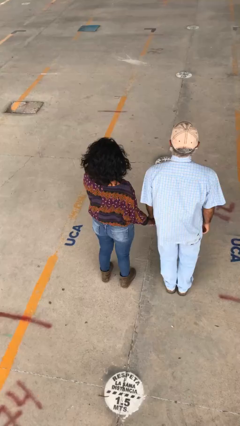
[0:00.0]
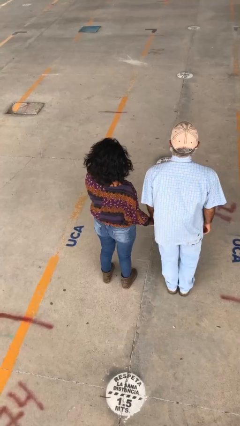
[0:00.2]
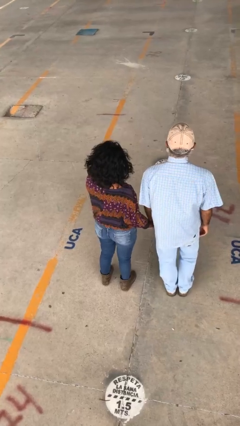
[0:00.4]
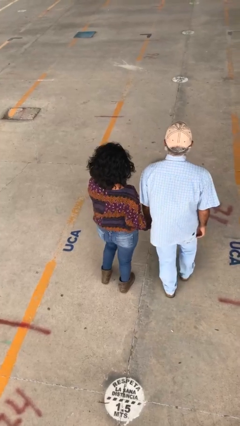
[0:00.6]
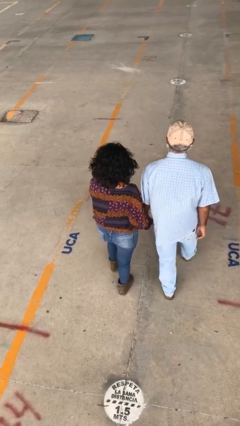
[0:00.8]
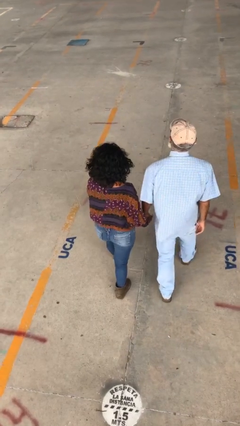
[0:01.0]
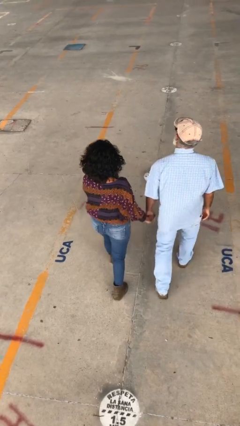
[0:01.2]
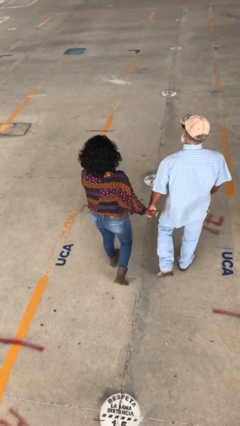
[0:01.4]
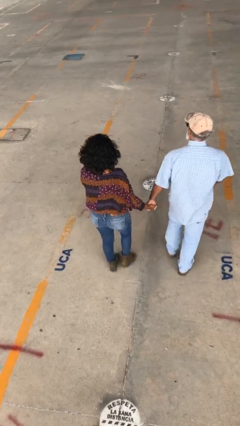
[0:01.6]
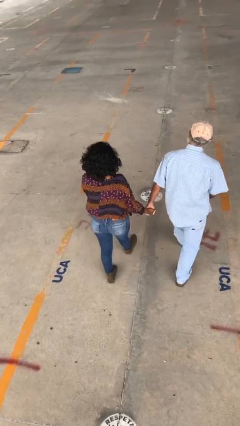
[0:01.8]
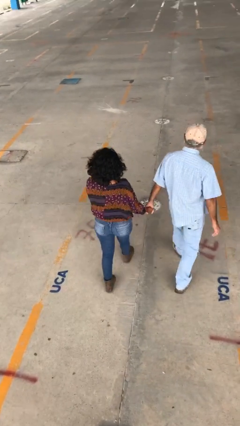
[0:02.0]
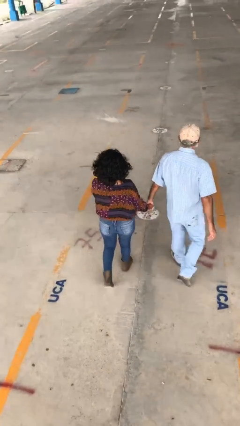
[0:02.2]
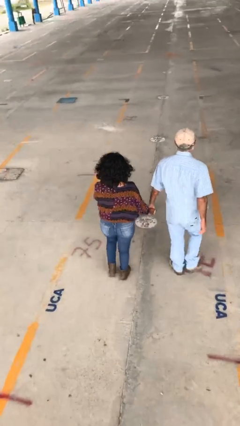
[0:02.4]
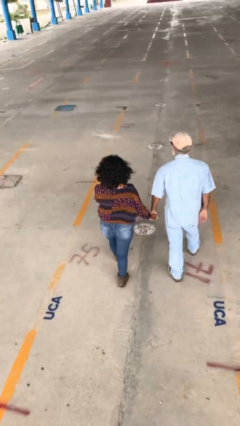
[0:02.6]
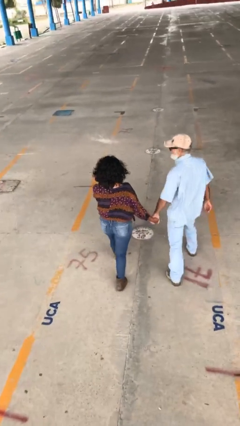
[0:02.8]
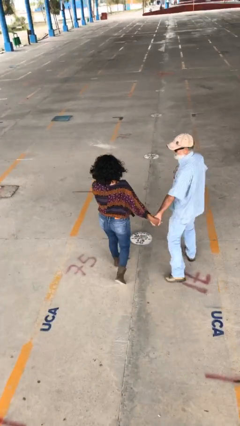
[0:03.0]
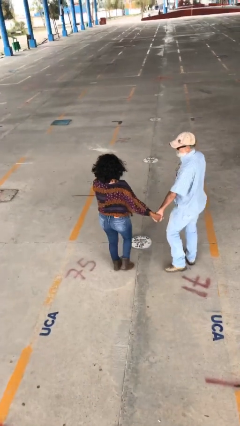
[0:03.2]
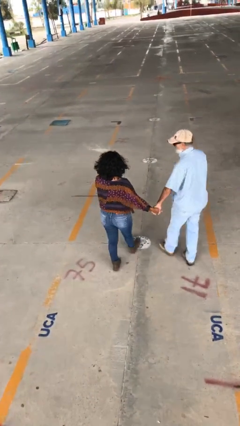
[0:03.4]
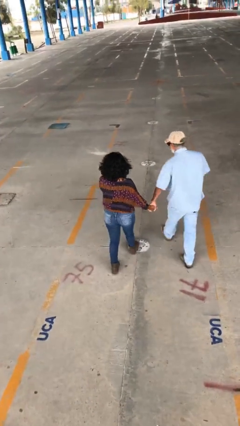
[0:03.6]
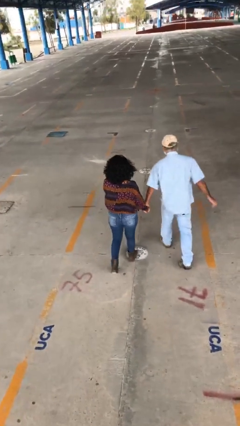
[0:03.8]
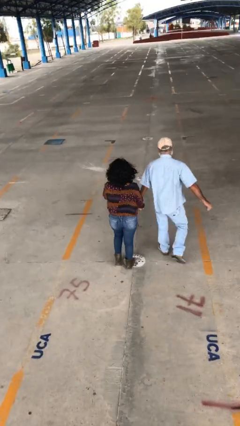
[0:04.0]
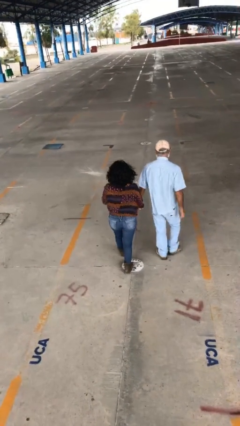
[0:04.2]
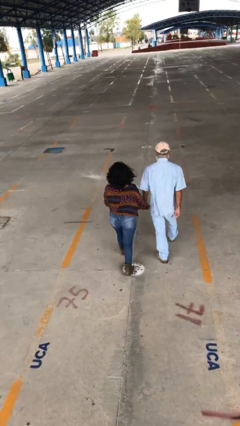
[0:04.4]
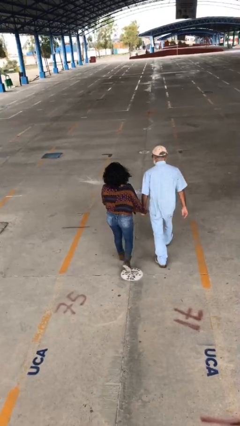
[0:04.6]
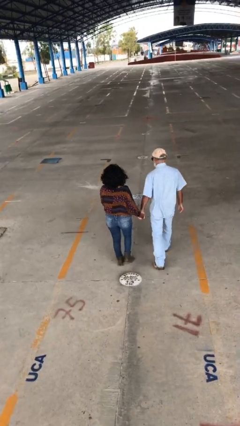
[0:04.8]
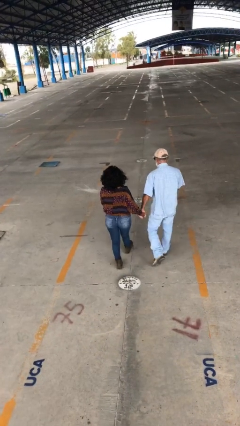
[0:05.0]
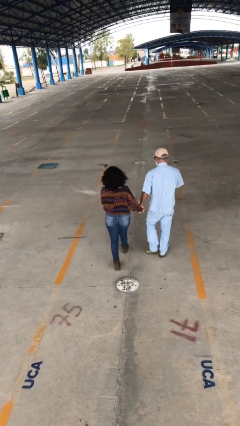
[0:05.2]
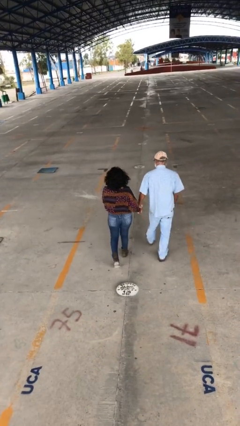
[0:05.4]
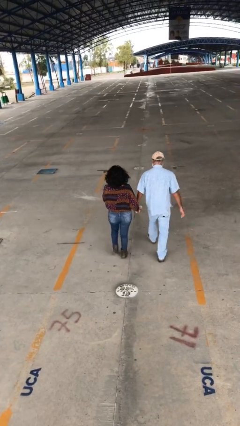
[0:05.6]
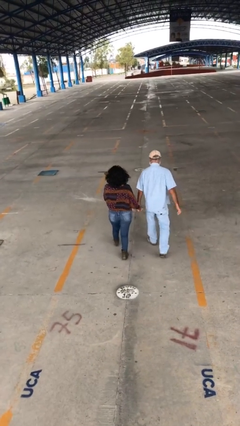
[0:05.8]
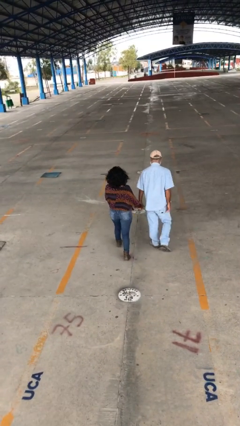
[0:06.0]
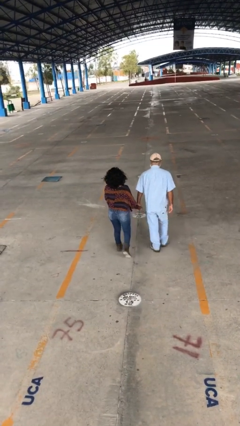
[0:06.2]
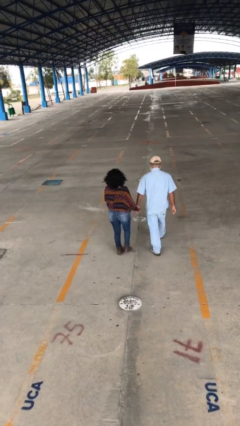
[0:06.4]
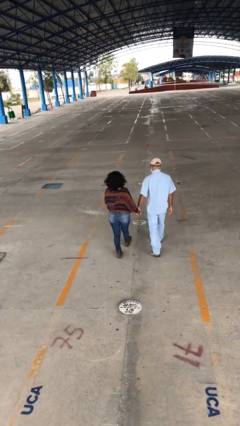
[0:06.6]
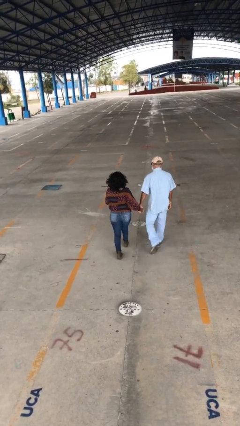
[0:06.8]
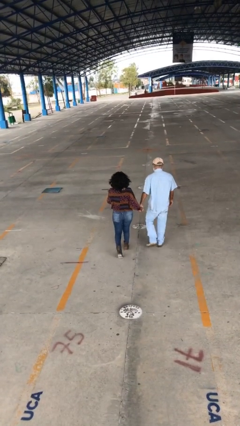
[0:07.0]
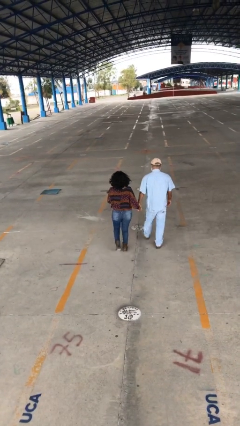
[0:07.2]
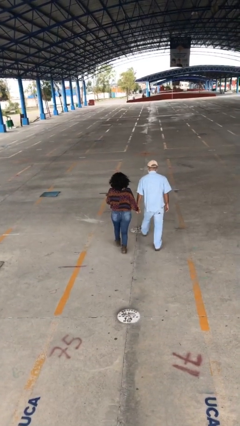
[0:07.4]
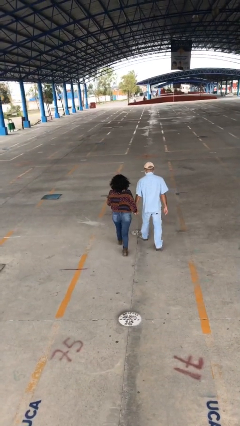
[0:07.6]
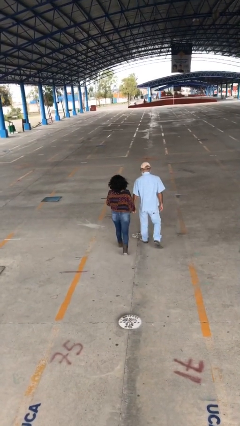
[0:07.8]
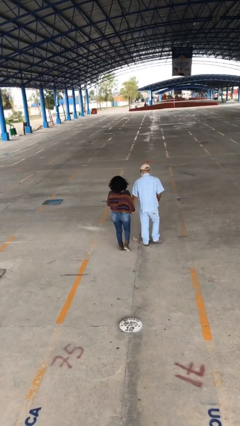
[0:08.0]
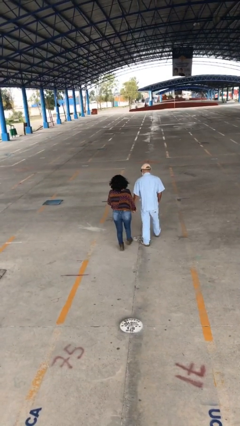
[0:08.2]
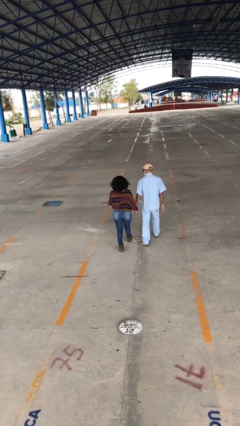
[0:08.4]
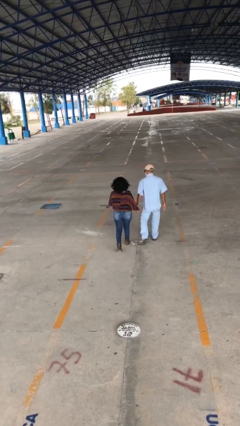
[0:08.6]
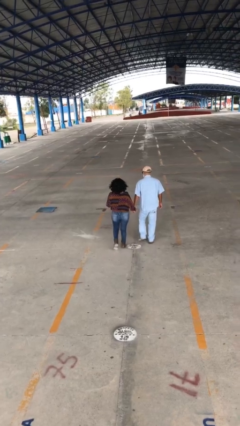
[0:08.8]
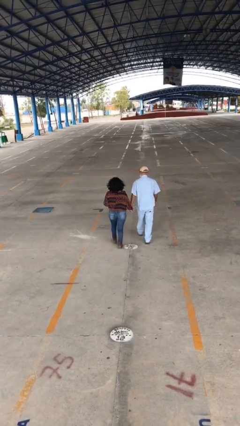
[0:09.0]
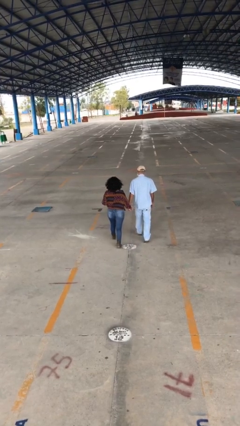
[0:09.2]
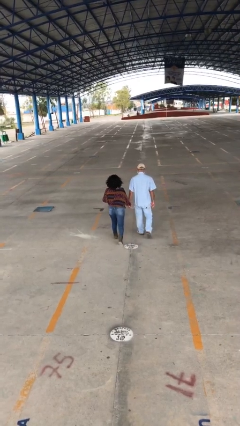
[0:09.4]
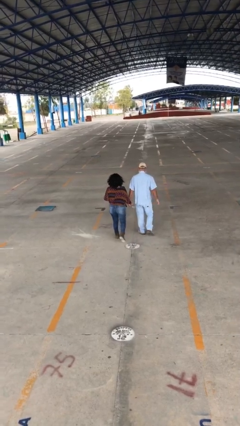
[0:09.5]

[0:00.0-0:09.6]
person holds hand

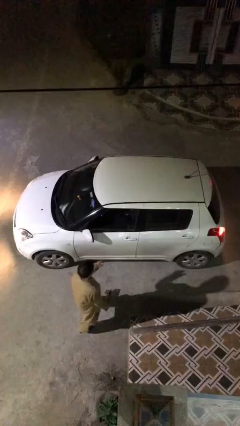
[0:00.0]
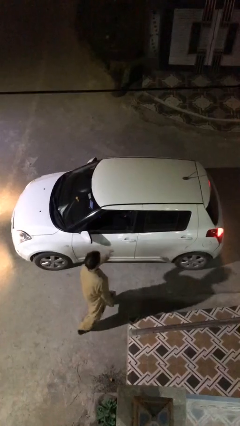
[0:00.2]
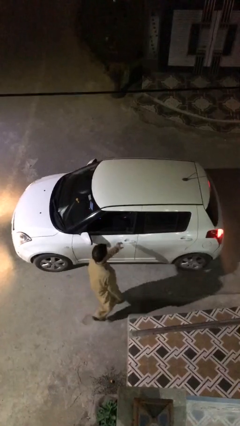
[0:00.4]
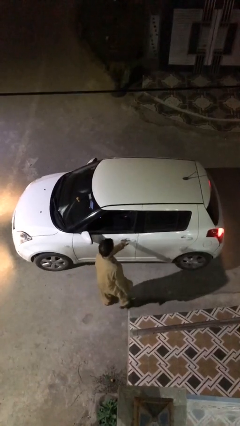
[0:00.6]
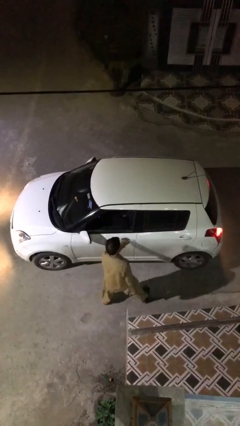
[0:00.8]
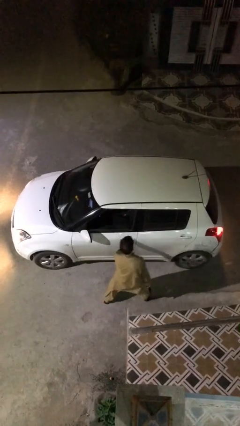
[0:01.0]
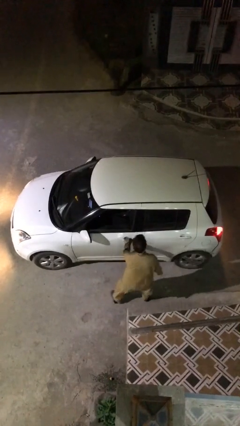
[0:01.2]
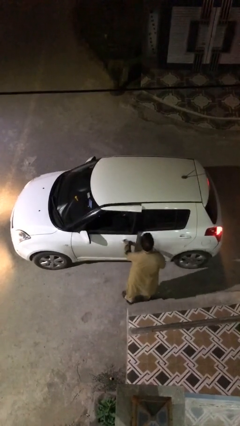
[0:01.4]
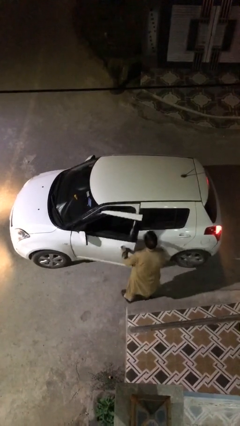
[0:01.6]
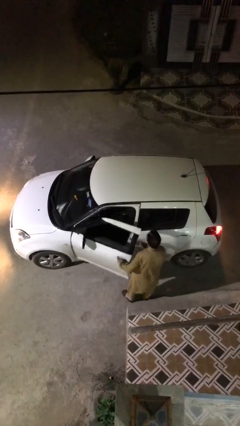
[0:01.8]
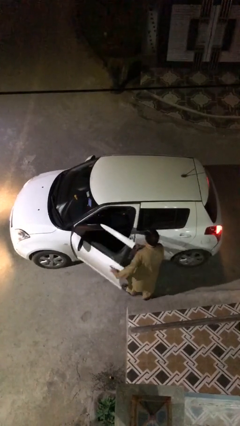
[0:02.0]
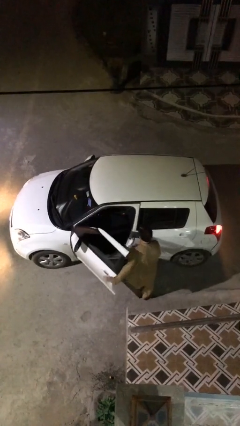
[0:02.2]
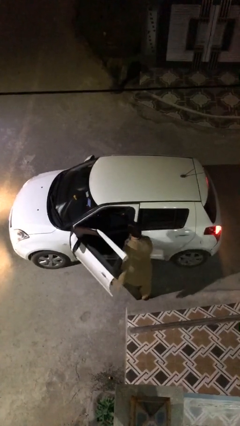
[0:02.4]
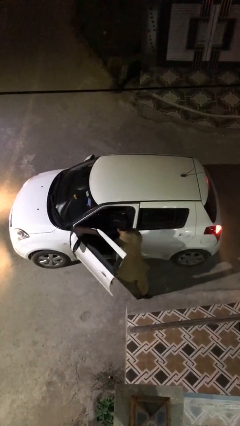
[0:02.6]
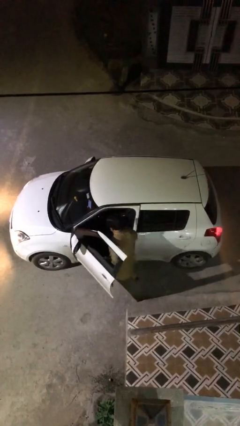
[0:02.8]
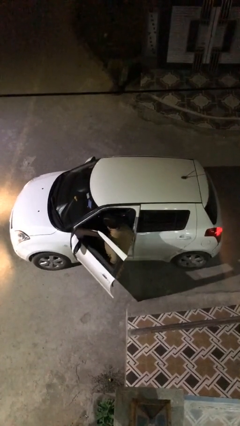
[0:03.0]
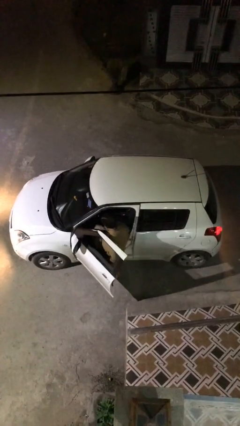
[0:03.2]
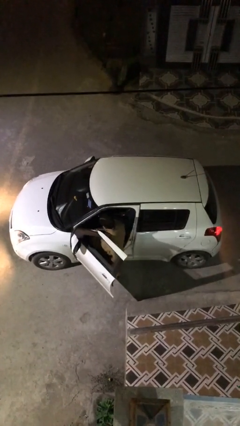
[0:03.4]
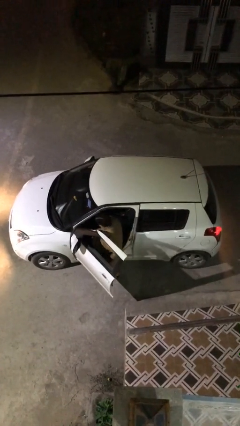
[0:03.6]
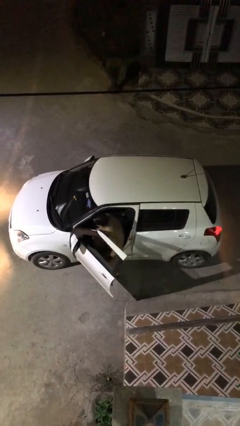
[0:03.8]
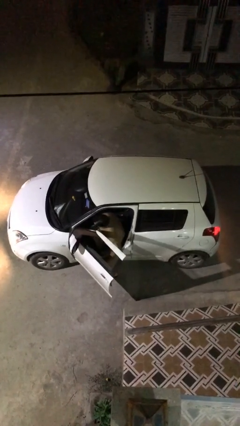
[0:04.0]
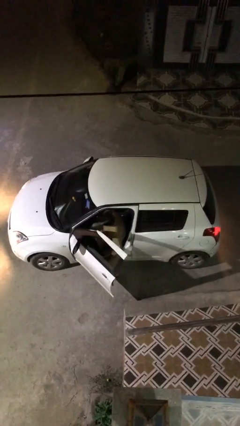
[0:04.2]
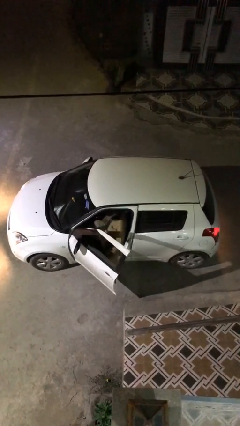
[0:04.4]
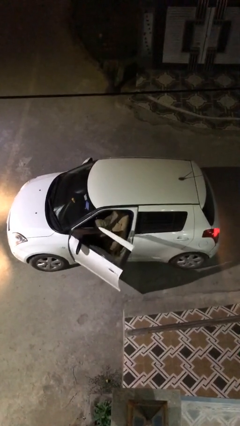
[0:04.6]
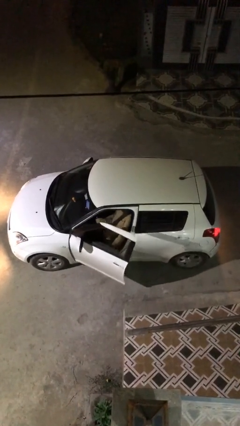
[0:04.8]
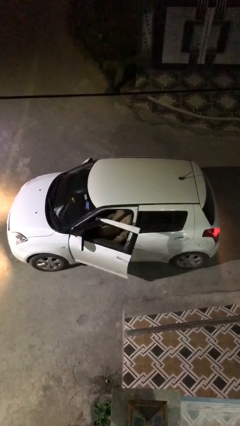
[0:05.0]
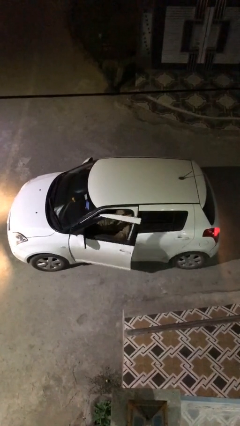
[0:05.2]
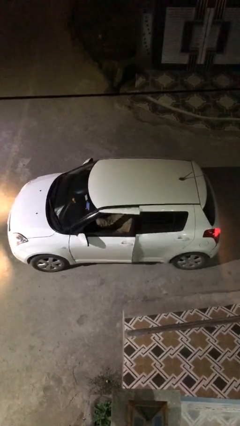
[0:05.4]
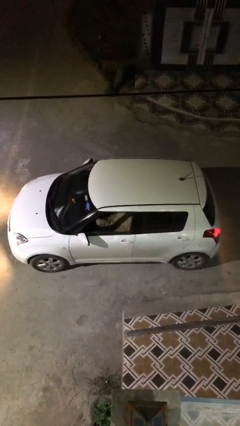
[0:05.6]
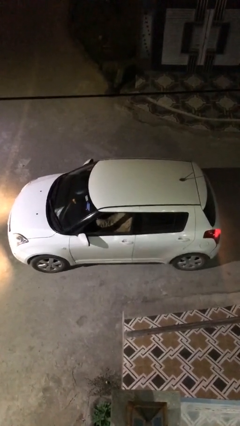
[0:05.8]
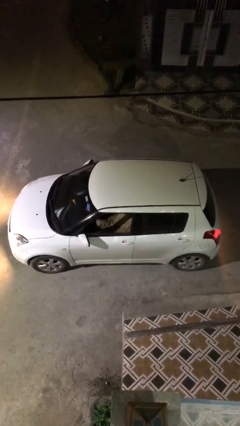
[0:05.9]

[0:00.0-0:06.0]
car picks up person

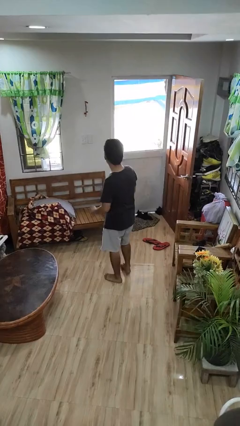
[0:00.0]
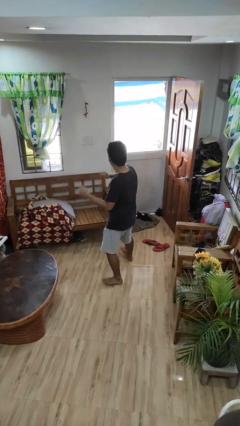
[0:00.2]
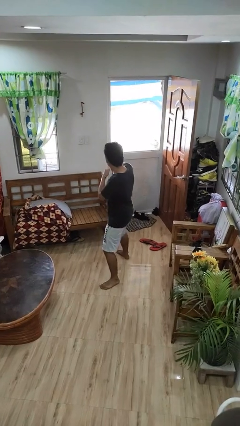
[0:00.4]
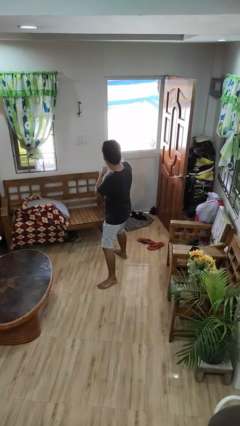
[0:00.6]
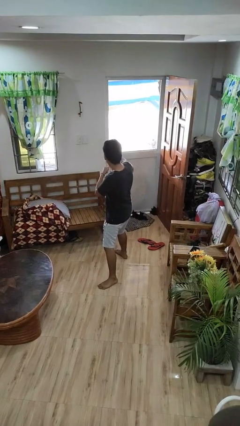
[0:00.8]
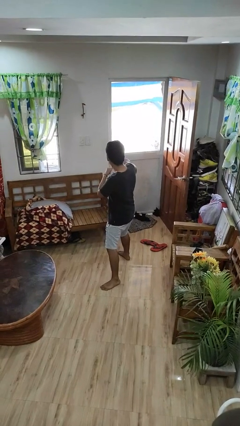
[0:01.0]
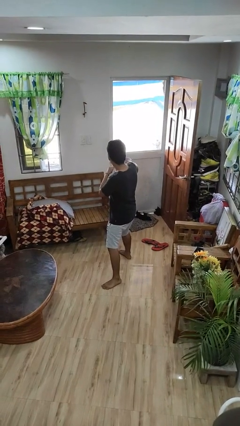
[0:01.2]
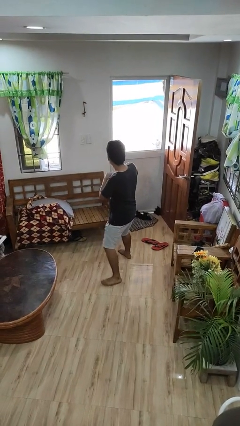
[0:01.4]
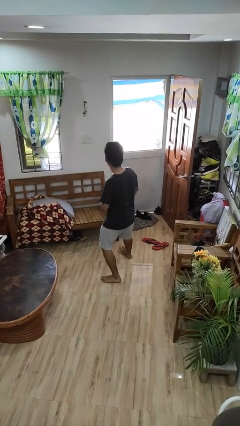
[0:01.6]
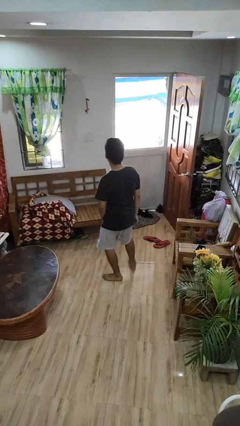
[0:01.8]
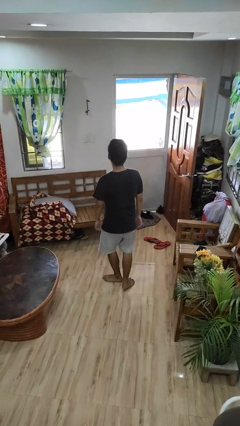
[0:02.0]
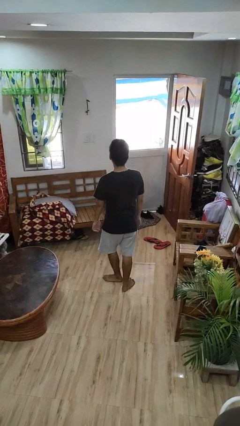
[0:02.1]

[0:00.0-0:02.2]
person karate chop

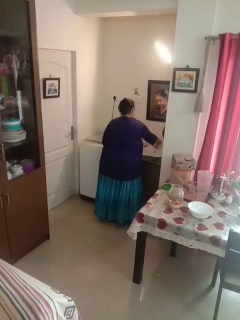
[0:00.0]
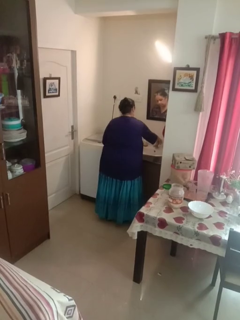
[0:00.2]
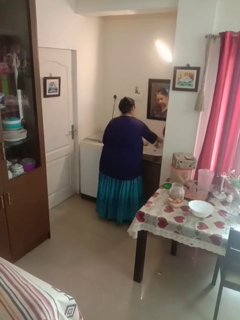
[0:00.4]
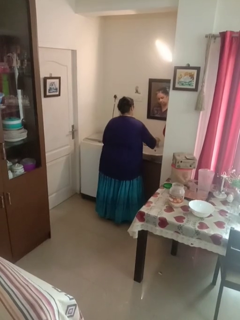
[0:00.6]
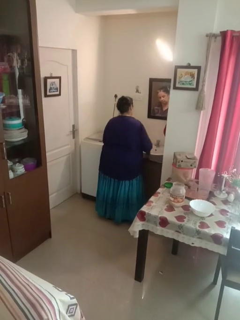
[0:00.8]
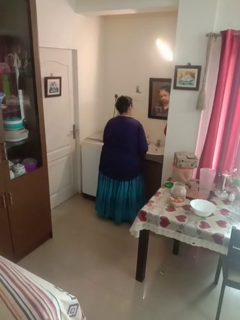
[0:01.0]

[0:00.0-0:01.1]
person turns on faucet
